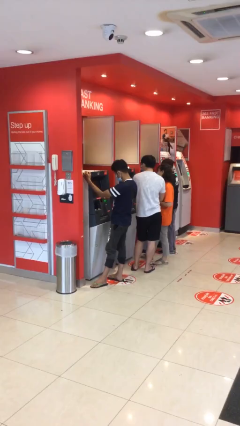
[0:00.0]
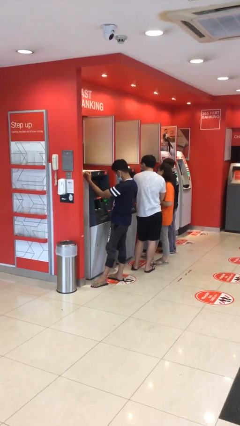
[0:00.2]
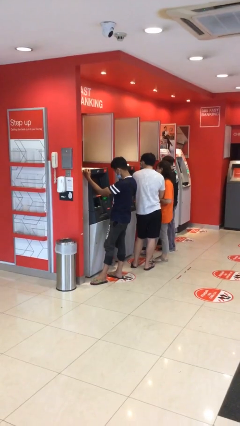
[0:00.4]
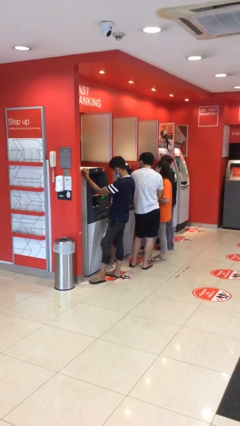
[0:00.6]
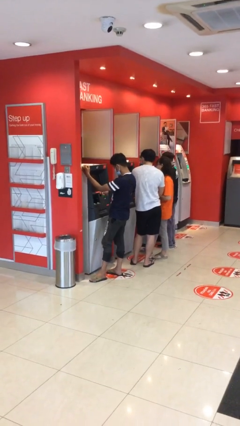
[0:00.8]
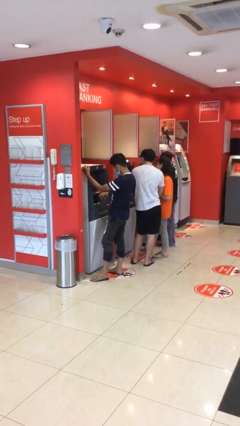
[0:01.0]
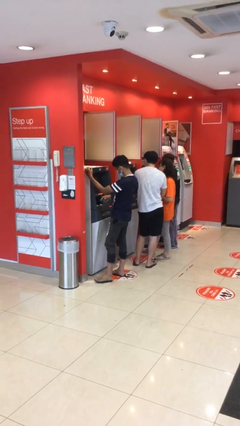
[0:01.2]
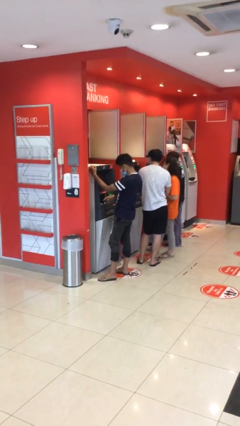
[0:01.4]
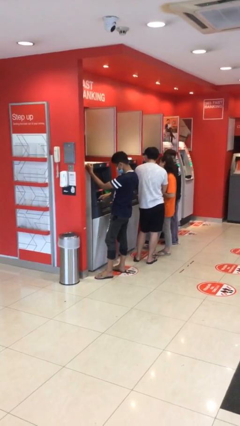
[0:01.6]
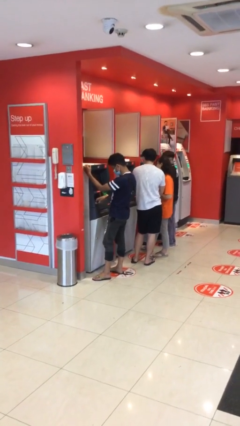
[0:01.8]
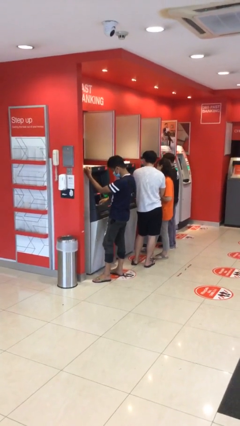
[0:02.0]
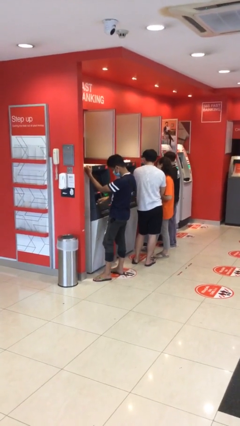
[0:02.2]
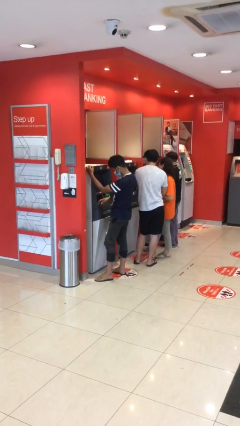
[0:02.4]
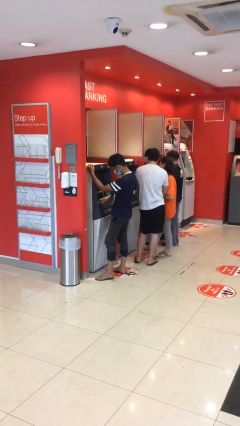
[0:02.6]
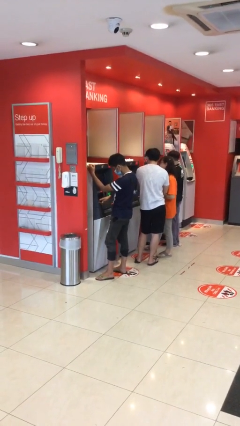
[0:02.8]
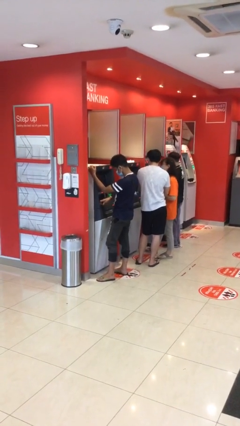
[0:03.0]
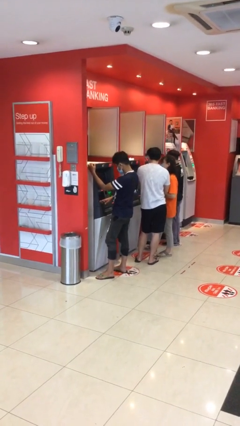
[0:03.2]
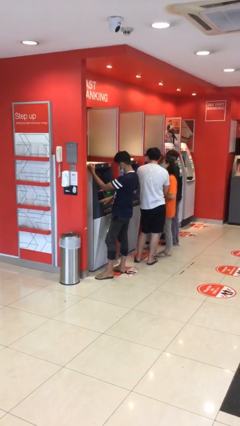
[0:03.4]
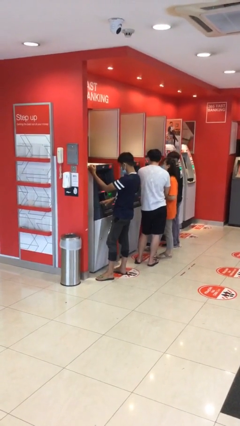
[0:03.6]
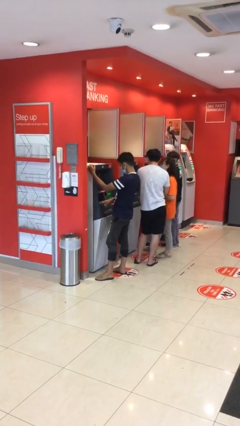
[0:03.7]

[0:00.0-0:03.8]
person purchases from machine

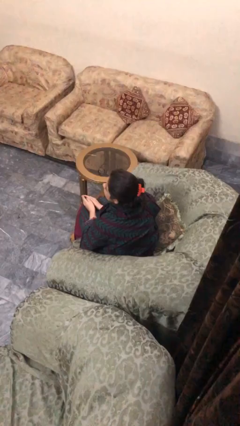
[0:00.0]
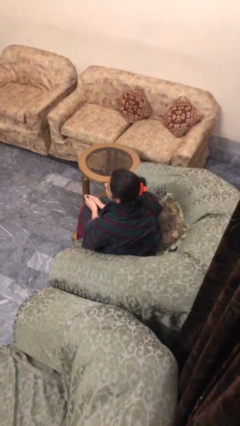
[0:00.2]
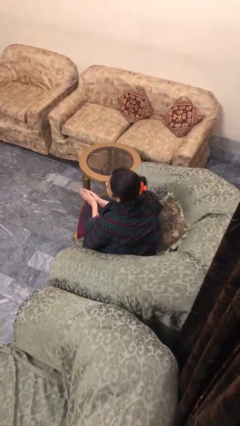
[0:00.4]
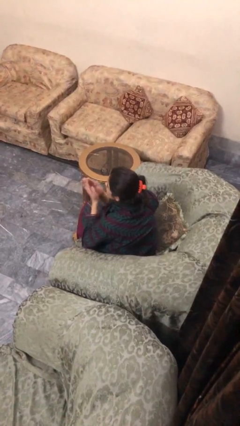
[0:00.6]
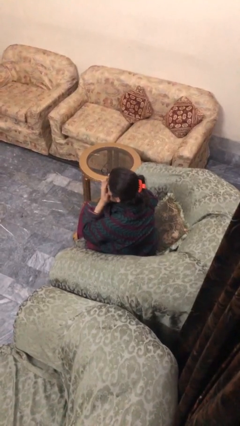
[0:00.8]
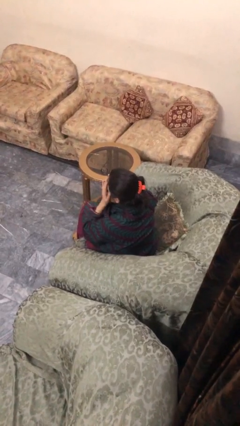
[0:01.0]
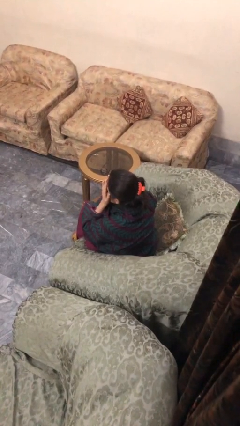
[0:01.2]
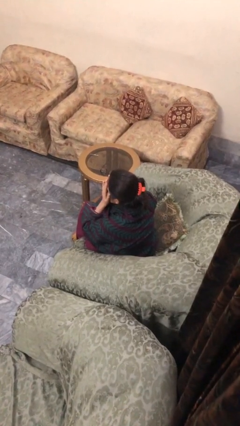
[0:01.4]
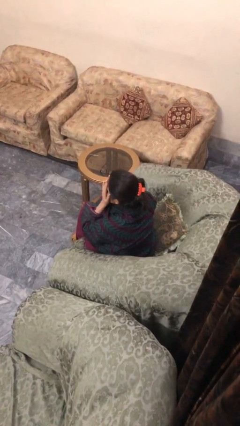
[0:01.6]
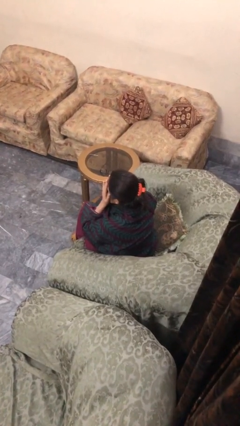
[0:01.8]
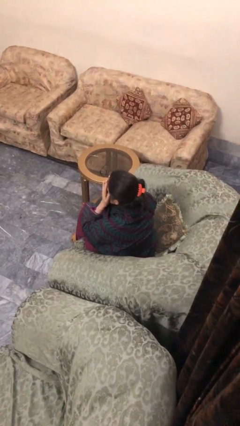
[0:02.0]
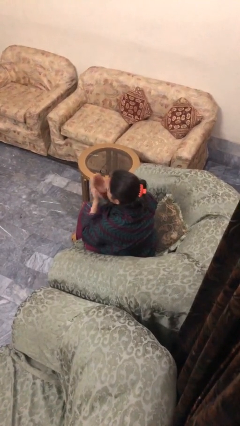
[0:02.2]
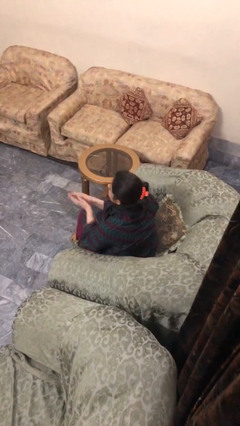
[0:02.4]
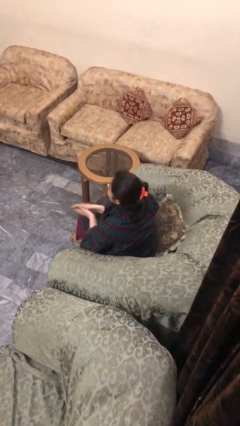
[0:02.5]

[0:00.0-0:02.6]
person covers face with hands

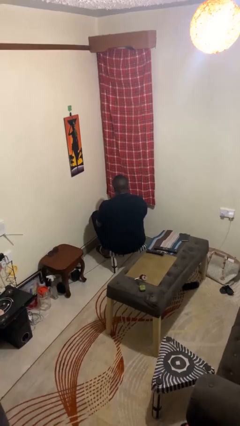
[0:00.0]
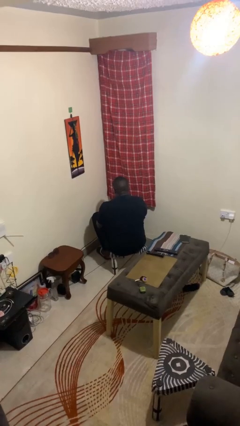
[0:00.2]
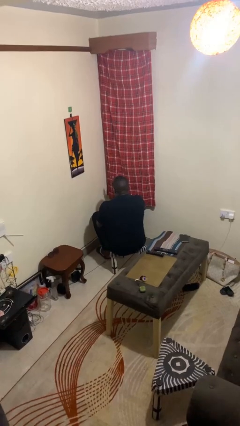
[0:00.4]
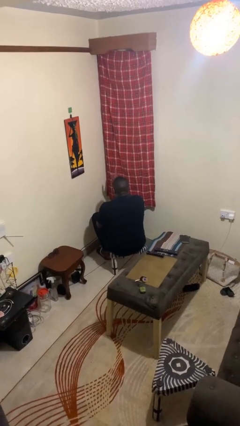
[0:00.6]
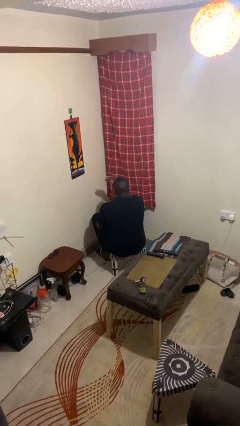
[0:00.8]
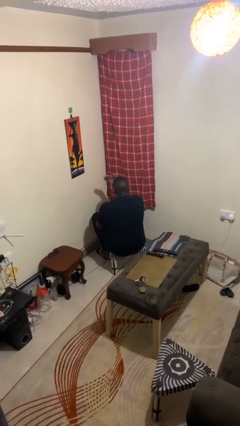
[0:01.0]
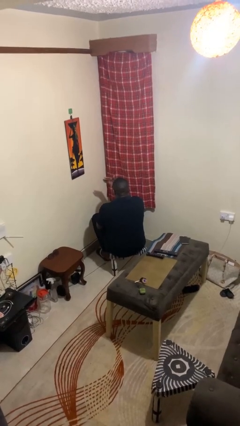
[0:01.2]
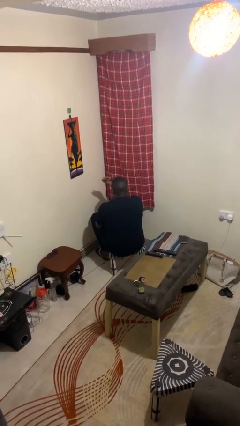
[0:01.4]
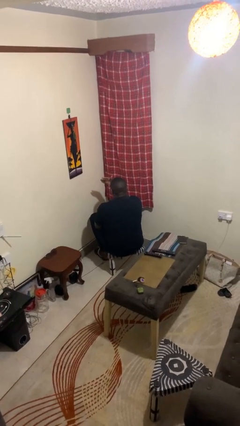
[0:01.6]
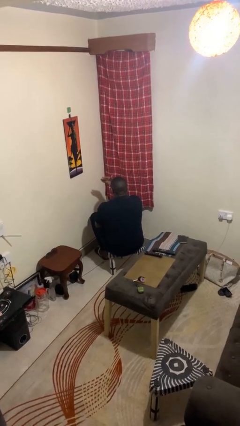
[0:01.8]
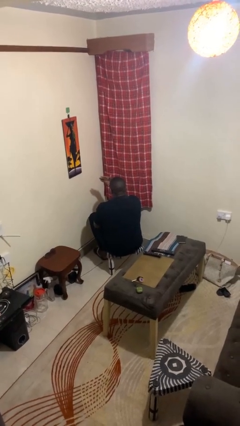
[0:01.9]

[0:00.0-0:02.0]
person gestures swipe left

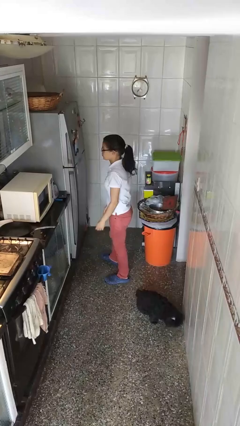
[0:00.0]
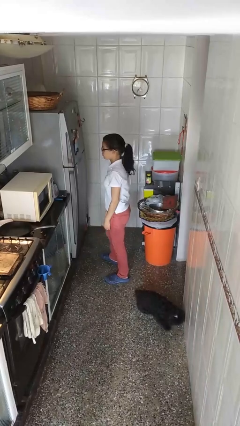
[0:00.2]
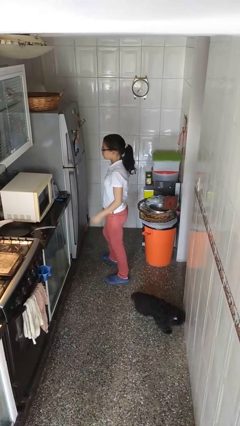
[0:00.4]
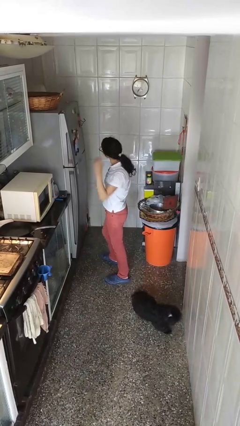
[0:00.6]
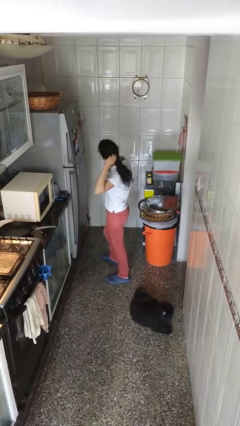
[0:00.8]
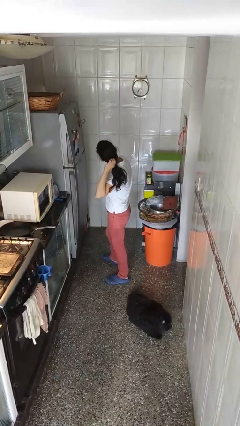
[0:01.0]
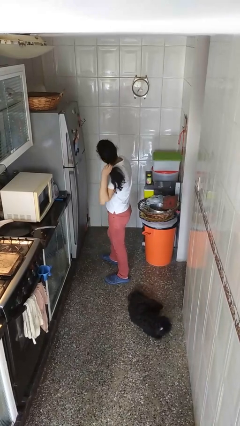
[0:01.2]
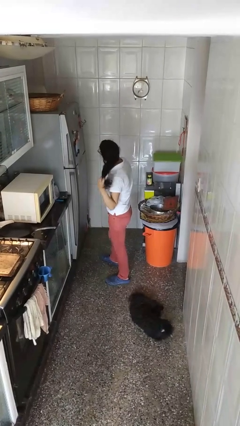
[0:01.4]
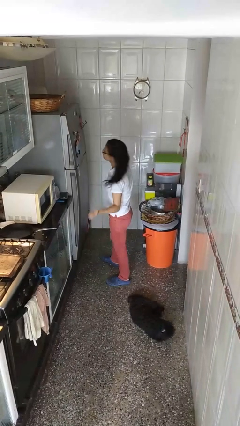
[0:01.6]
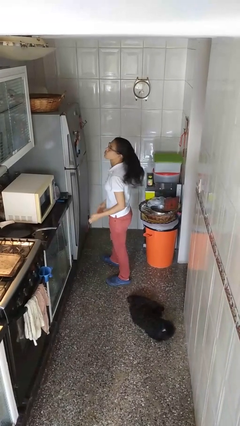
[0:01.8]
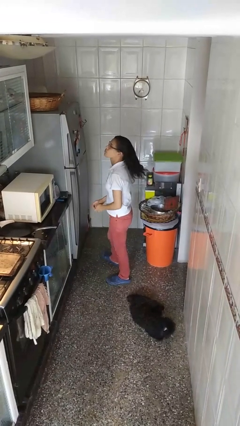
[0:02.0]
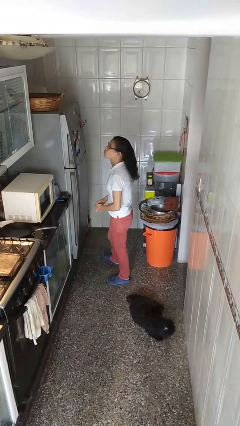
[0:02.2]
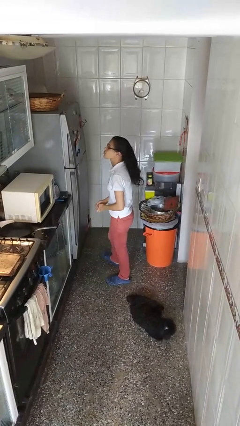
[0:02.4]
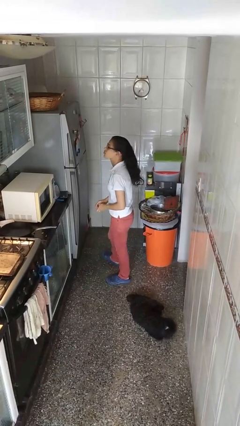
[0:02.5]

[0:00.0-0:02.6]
person takes off hairtie

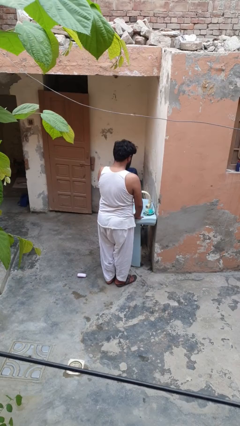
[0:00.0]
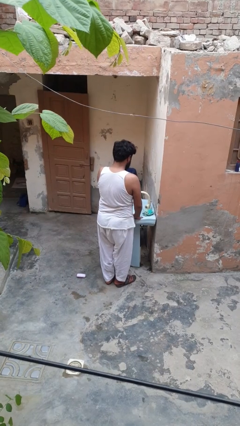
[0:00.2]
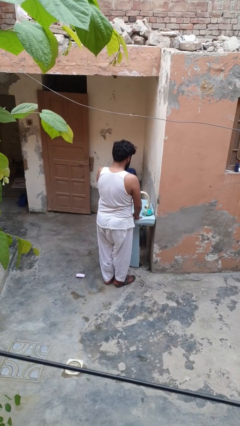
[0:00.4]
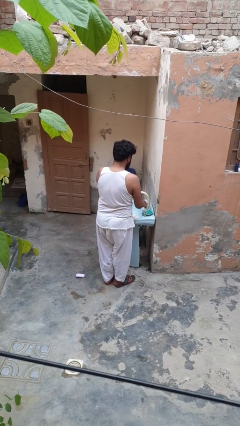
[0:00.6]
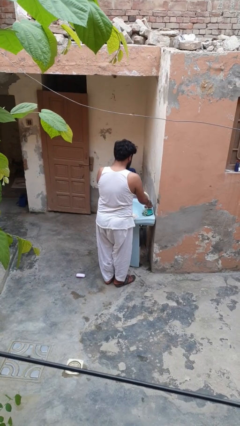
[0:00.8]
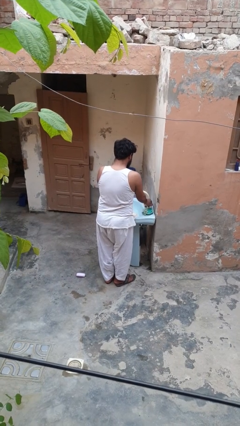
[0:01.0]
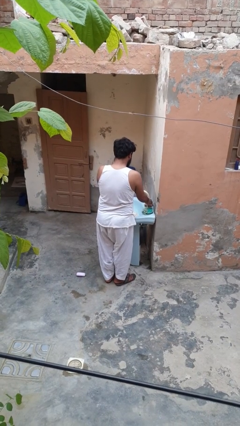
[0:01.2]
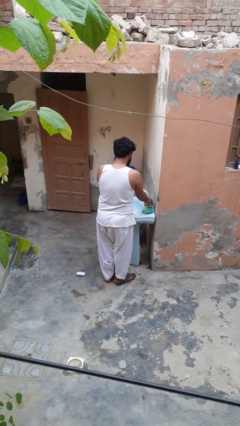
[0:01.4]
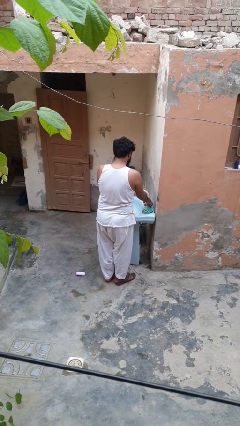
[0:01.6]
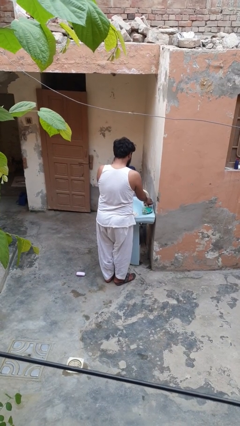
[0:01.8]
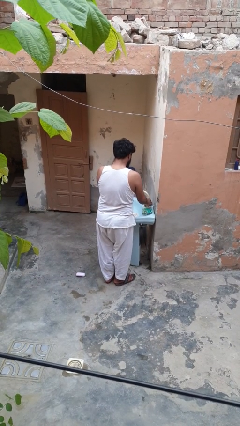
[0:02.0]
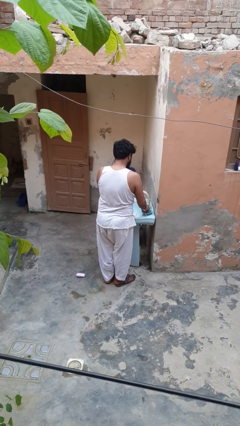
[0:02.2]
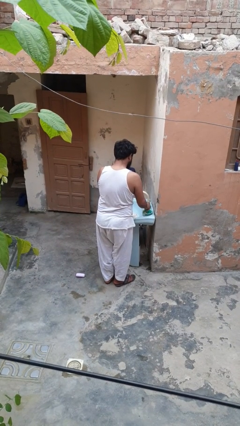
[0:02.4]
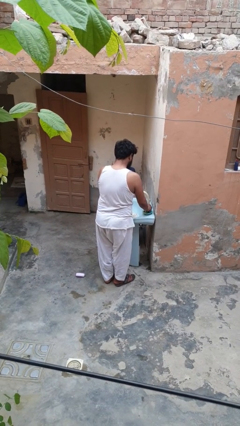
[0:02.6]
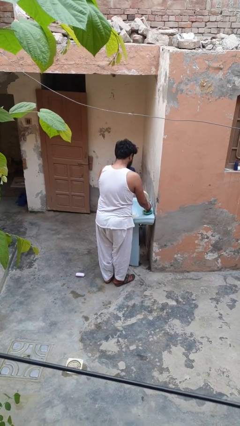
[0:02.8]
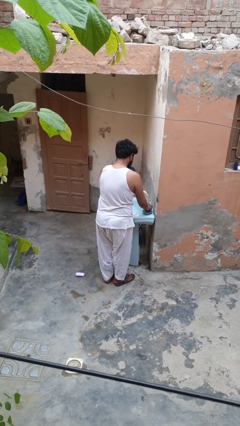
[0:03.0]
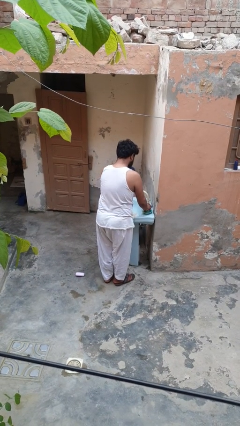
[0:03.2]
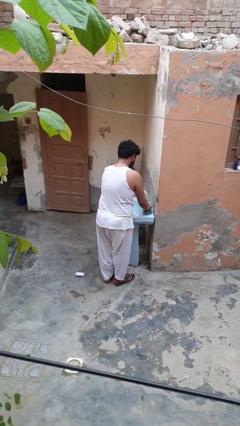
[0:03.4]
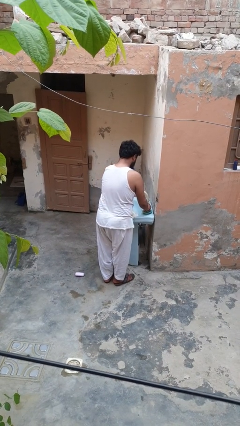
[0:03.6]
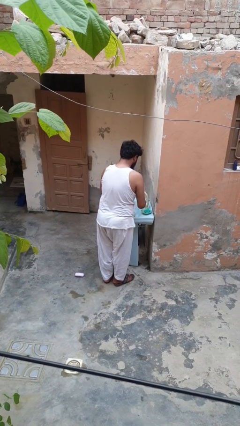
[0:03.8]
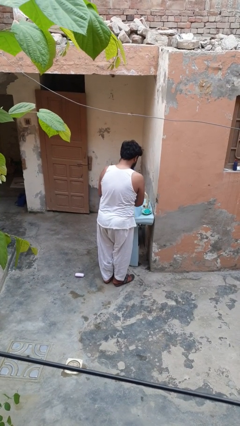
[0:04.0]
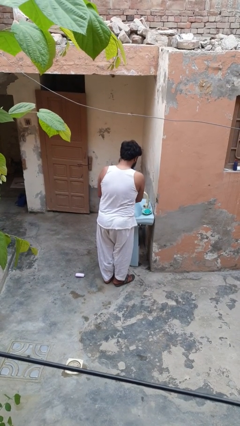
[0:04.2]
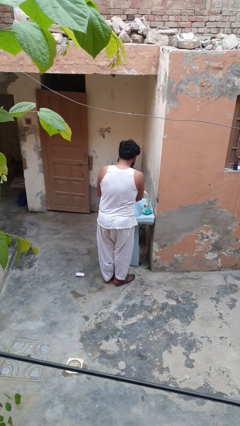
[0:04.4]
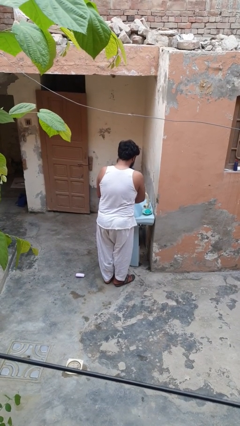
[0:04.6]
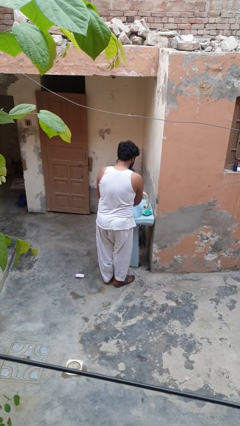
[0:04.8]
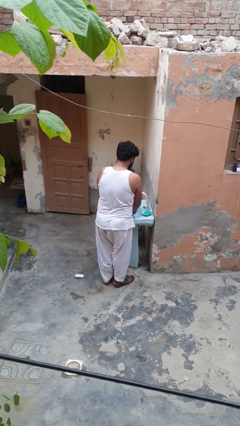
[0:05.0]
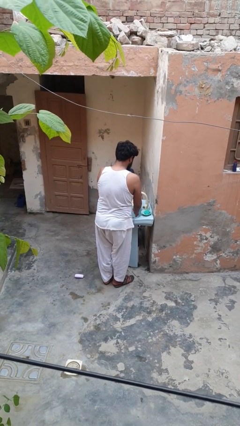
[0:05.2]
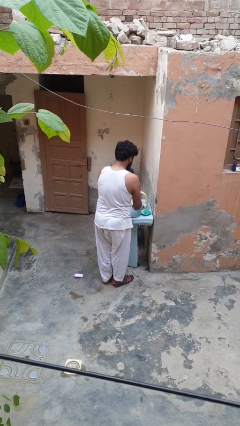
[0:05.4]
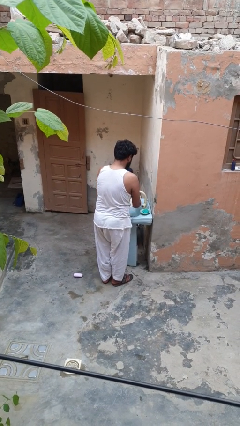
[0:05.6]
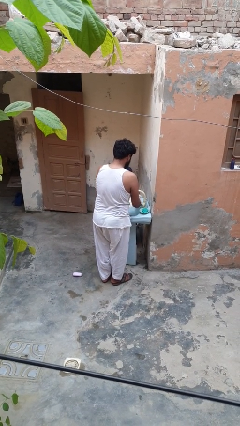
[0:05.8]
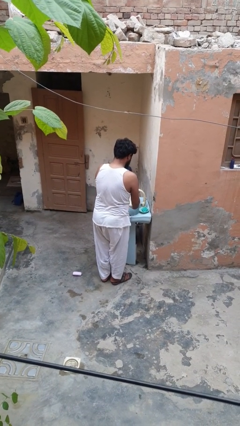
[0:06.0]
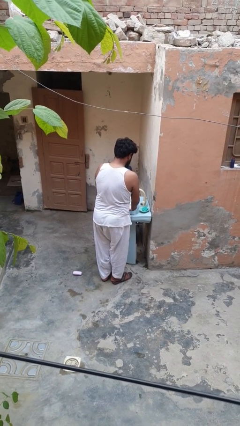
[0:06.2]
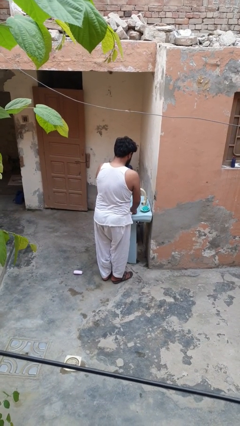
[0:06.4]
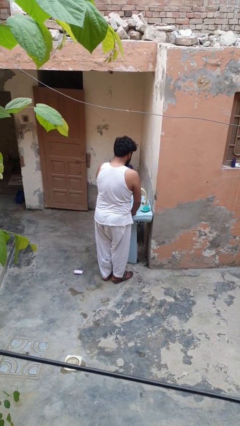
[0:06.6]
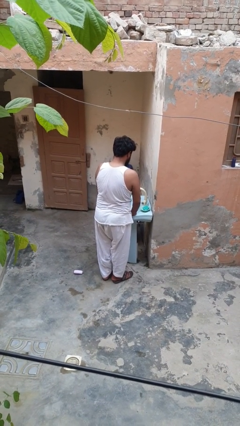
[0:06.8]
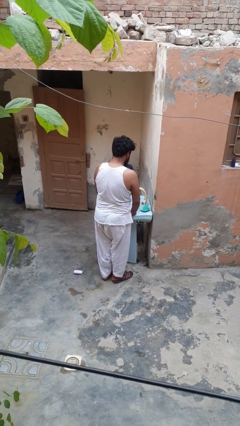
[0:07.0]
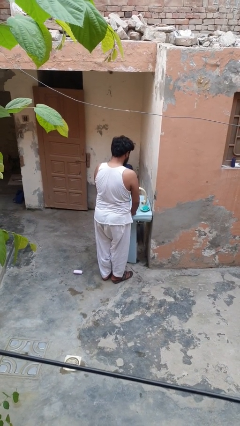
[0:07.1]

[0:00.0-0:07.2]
person washes dish
